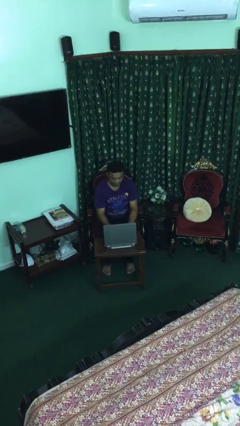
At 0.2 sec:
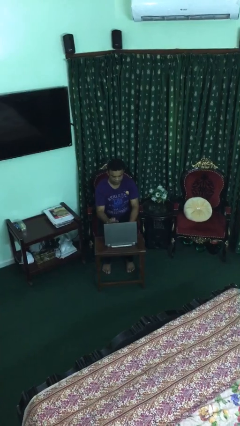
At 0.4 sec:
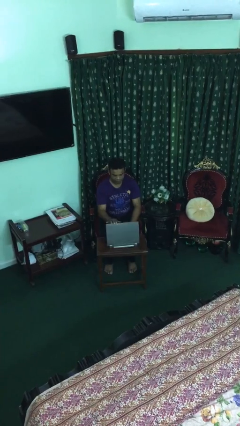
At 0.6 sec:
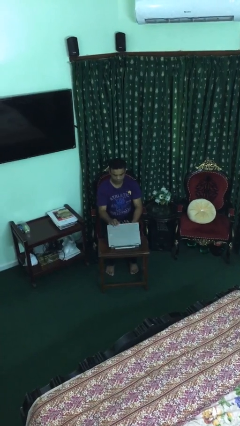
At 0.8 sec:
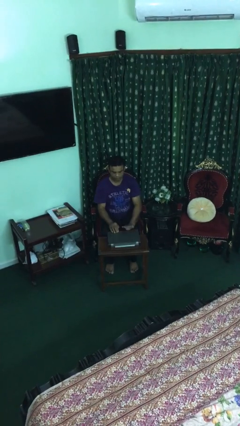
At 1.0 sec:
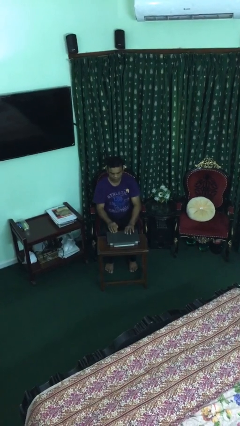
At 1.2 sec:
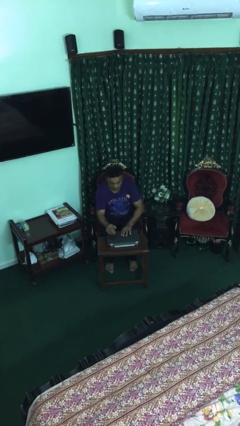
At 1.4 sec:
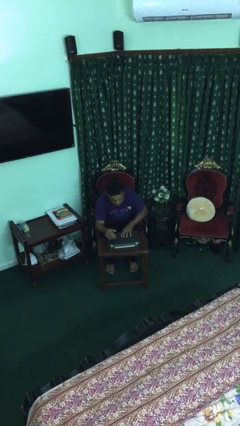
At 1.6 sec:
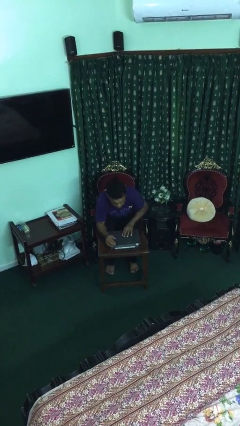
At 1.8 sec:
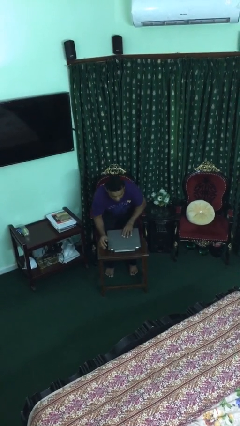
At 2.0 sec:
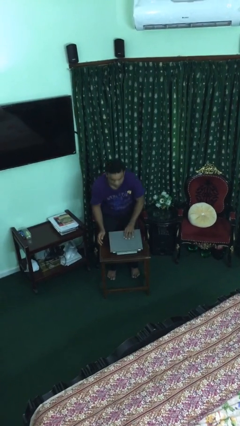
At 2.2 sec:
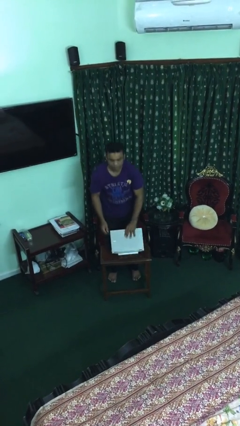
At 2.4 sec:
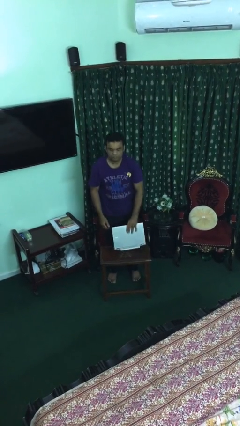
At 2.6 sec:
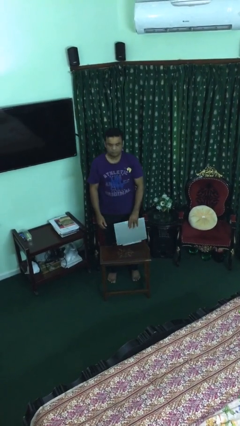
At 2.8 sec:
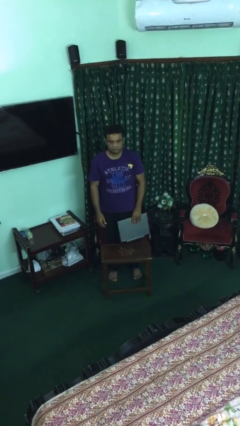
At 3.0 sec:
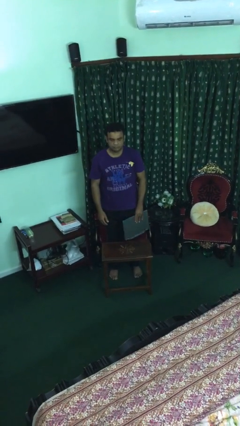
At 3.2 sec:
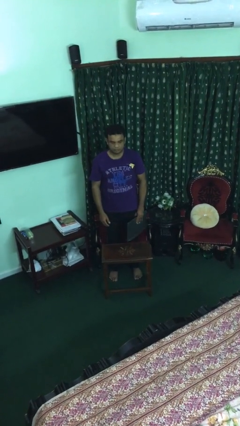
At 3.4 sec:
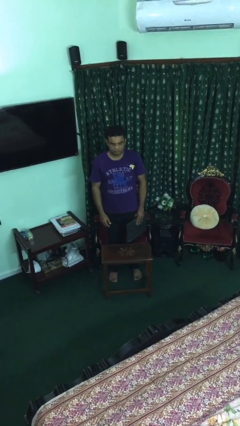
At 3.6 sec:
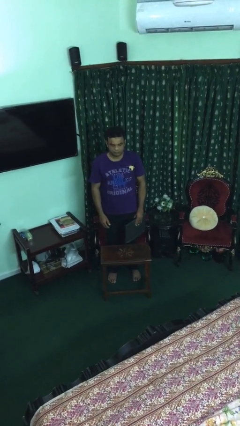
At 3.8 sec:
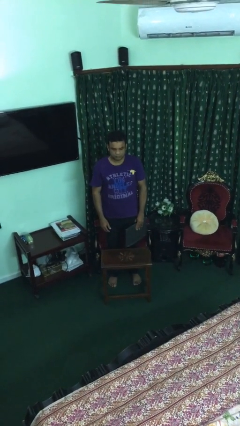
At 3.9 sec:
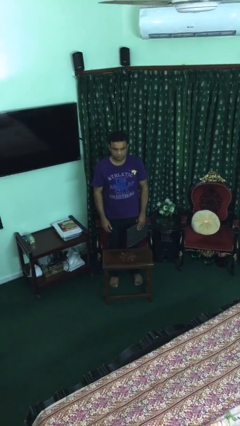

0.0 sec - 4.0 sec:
person stands up

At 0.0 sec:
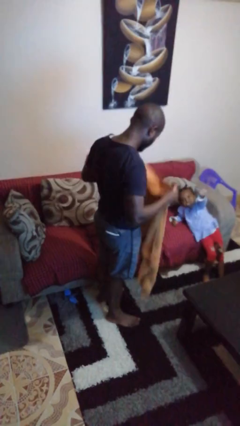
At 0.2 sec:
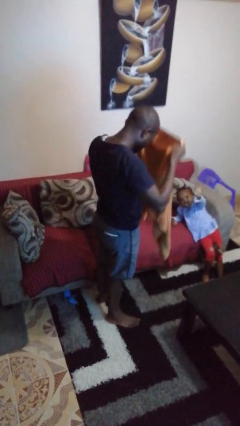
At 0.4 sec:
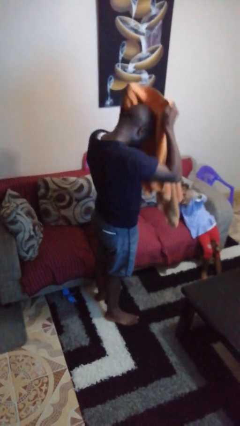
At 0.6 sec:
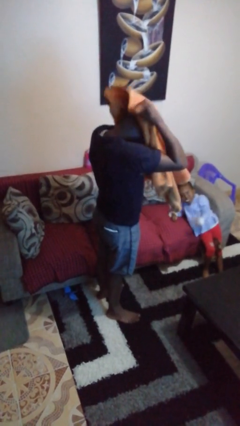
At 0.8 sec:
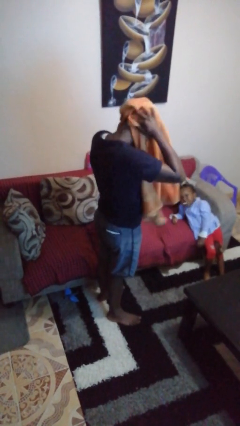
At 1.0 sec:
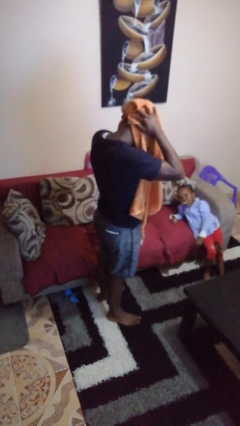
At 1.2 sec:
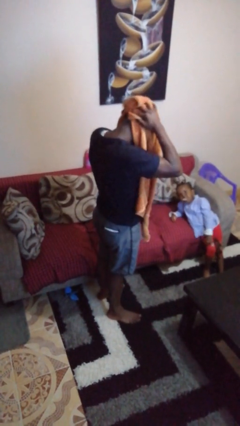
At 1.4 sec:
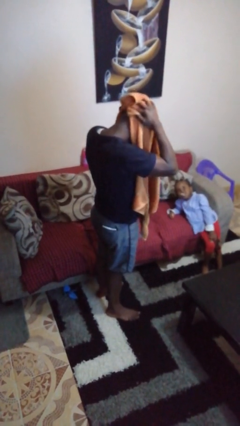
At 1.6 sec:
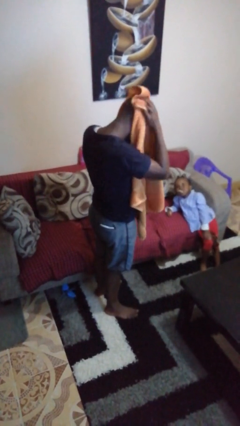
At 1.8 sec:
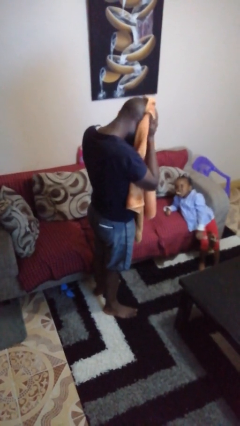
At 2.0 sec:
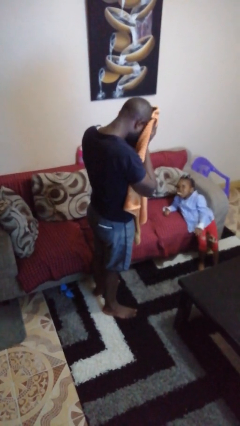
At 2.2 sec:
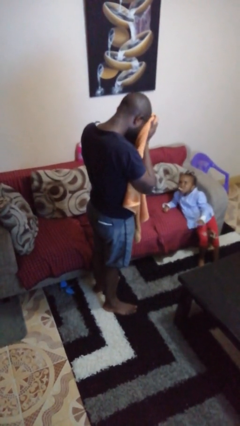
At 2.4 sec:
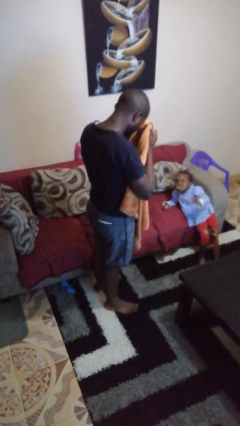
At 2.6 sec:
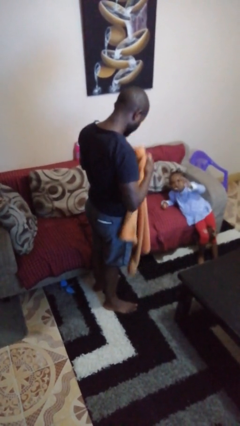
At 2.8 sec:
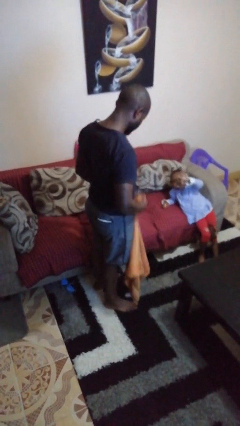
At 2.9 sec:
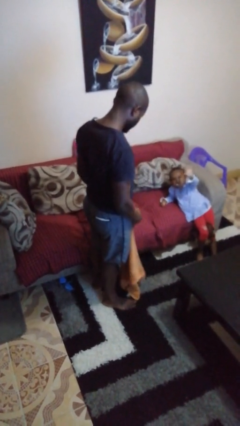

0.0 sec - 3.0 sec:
person dries hair with towel

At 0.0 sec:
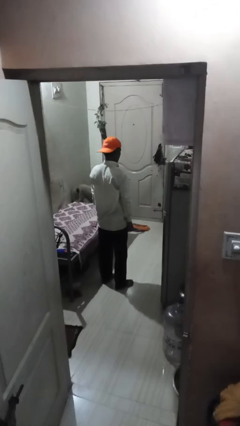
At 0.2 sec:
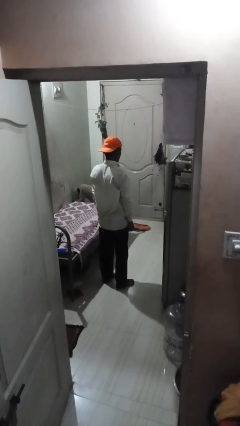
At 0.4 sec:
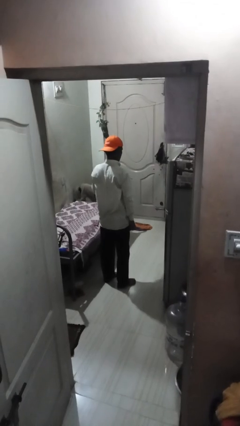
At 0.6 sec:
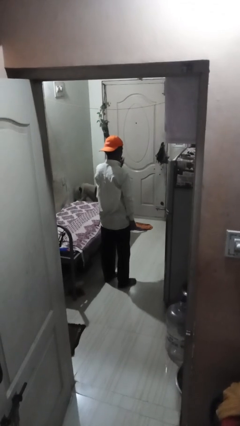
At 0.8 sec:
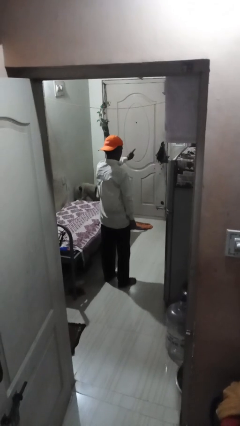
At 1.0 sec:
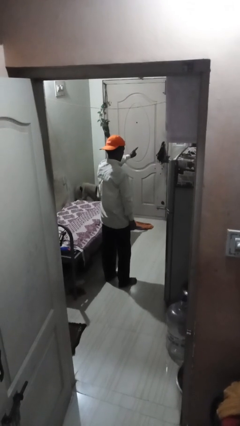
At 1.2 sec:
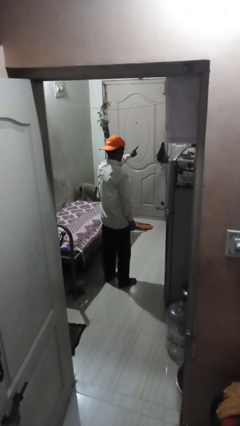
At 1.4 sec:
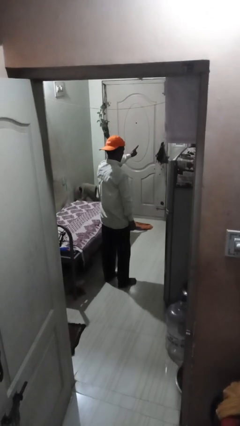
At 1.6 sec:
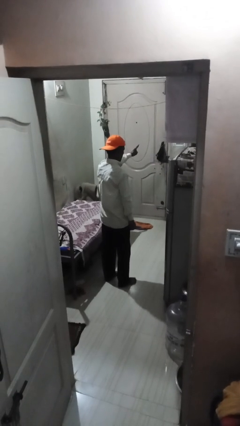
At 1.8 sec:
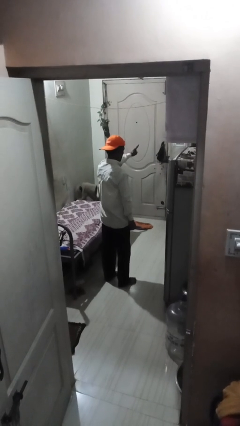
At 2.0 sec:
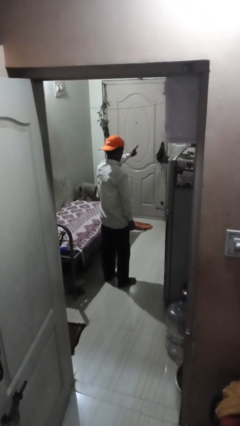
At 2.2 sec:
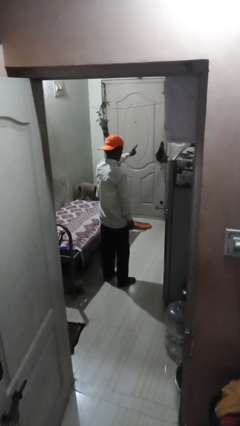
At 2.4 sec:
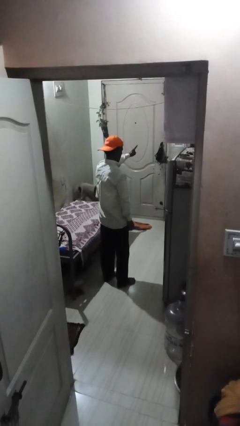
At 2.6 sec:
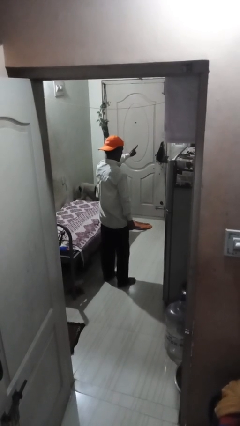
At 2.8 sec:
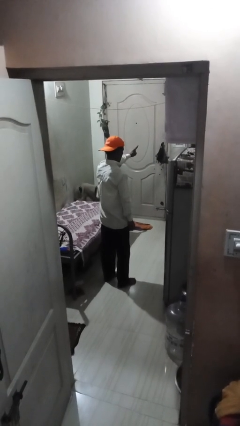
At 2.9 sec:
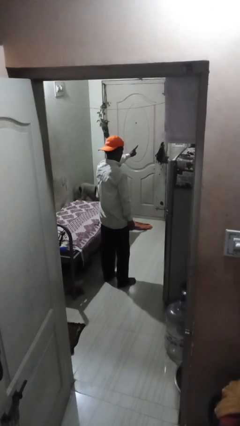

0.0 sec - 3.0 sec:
person points at person

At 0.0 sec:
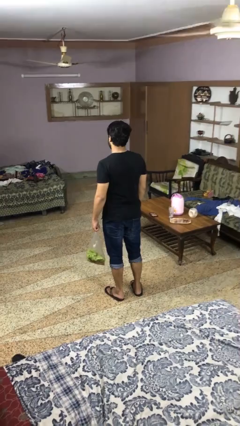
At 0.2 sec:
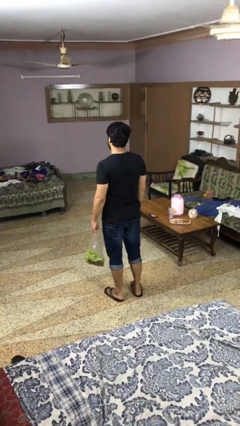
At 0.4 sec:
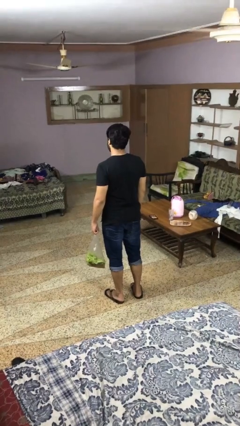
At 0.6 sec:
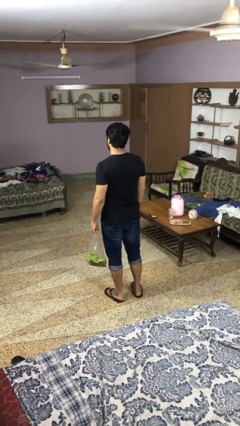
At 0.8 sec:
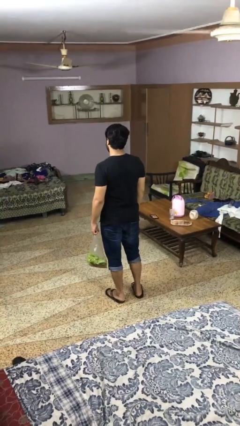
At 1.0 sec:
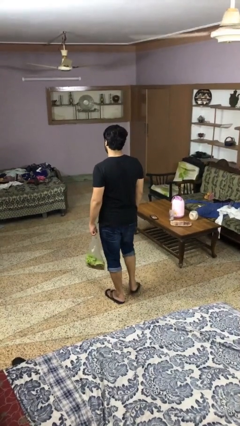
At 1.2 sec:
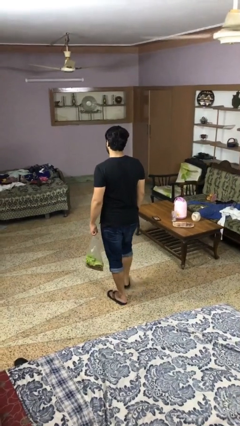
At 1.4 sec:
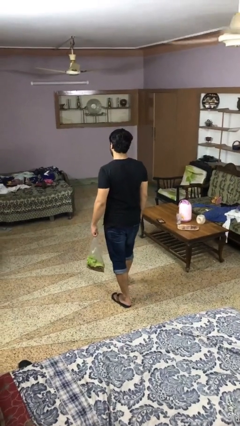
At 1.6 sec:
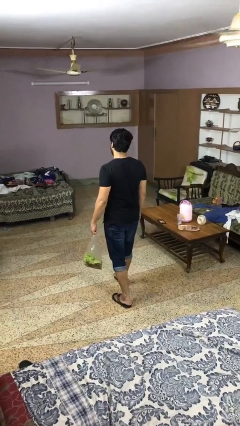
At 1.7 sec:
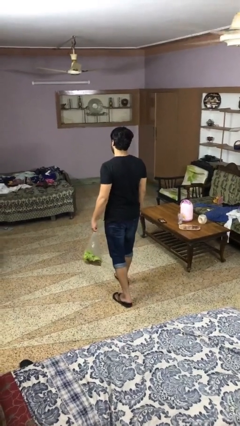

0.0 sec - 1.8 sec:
person carries groceries

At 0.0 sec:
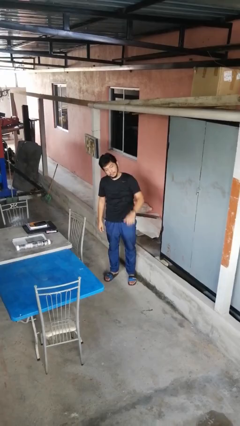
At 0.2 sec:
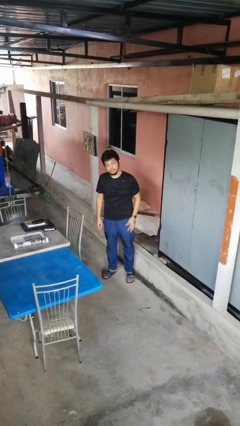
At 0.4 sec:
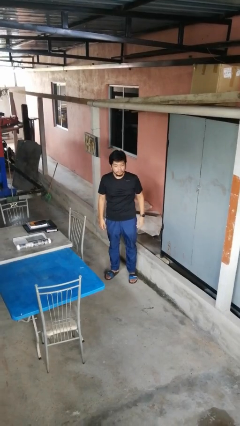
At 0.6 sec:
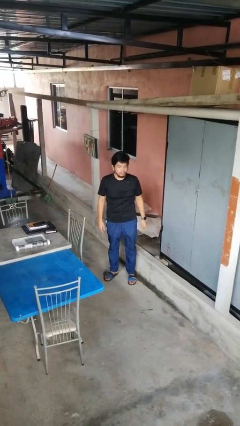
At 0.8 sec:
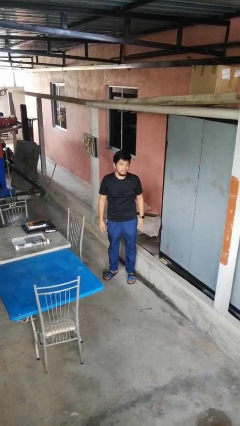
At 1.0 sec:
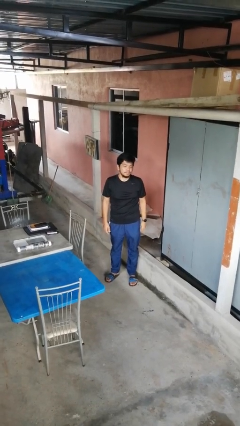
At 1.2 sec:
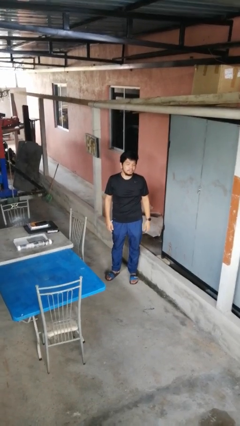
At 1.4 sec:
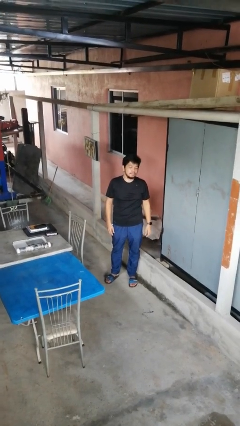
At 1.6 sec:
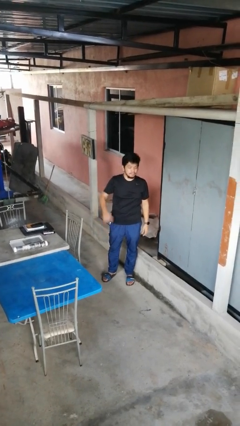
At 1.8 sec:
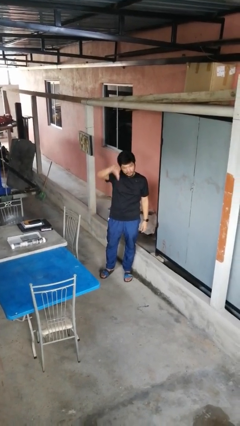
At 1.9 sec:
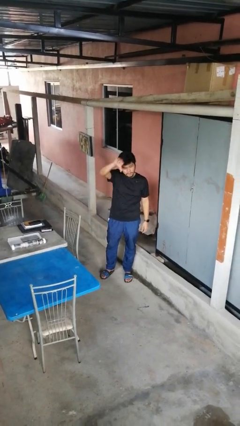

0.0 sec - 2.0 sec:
person opens gate

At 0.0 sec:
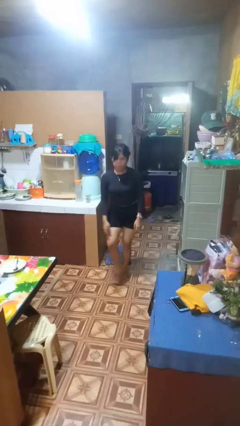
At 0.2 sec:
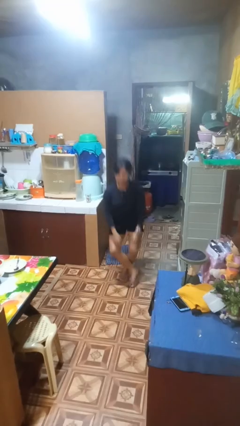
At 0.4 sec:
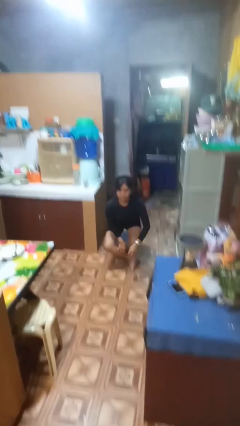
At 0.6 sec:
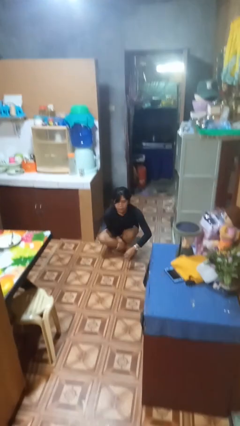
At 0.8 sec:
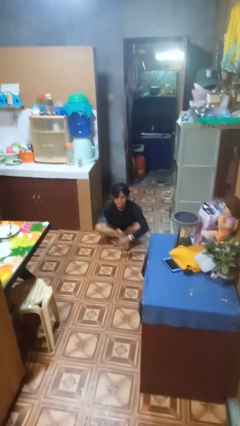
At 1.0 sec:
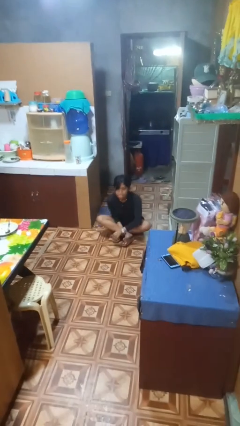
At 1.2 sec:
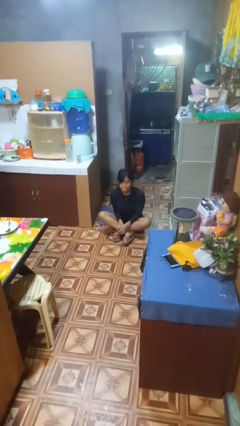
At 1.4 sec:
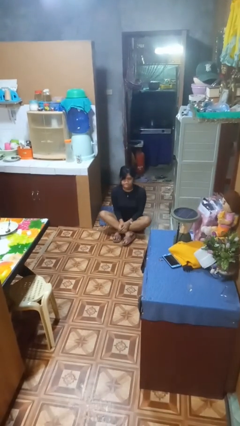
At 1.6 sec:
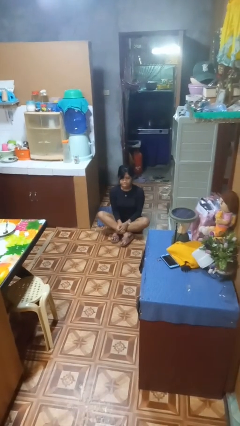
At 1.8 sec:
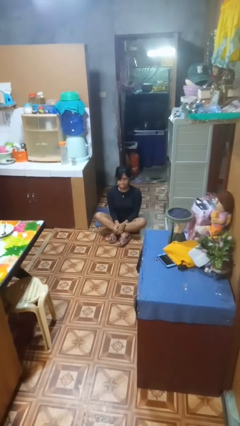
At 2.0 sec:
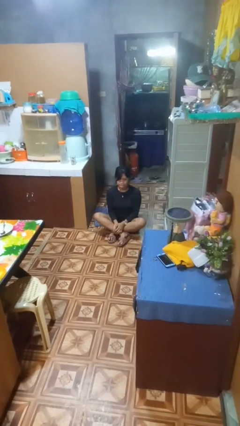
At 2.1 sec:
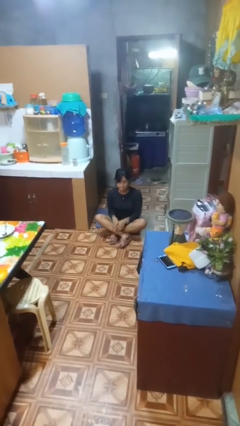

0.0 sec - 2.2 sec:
person sits crisscross

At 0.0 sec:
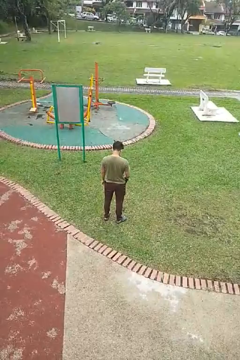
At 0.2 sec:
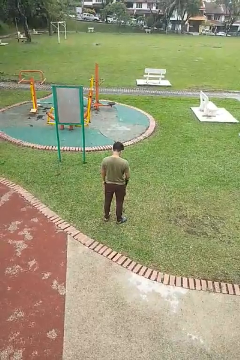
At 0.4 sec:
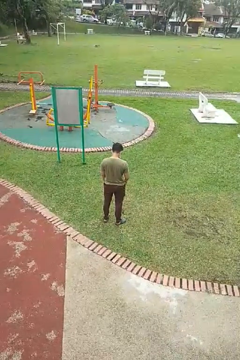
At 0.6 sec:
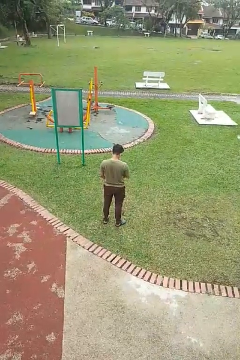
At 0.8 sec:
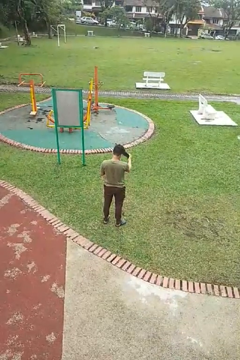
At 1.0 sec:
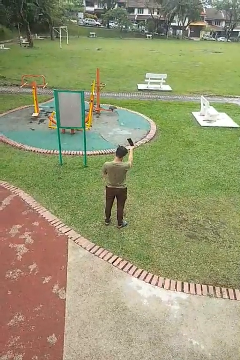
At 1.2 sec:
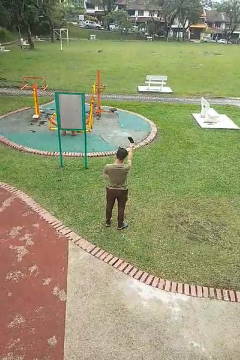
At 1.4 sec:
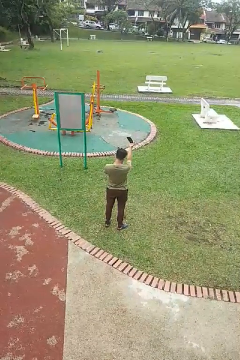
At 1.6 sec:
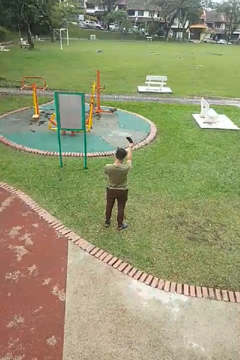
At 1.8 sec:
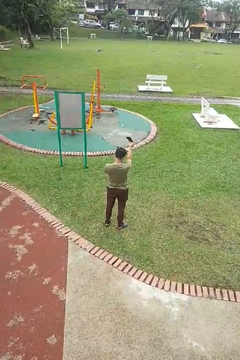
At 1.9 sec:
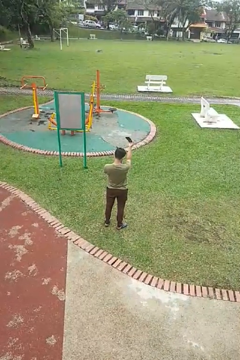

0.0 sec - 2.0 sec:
person takes selfie
